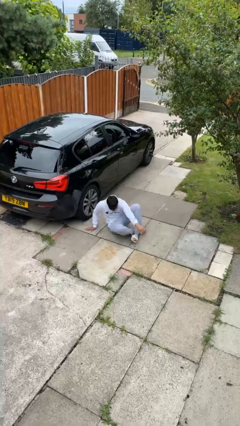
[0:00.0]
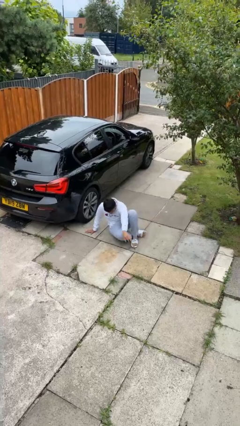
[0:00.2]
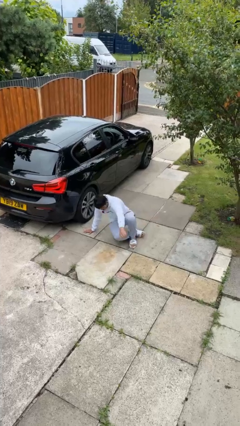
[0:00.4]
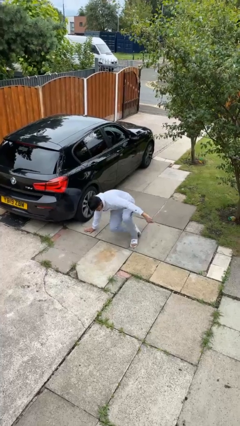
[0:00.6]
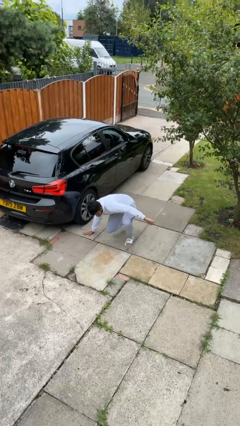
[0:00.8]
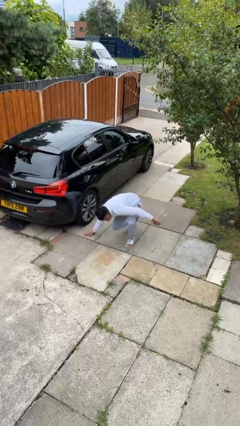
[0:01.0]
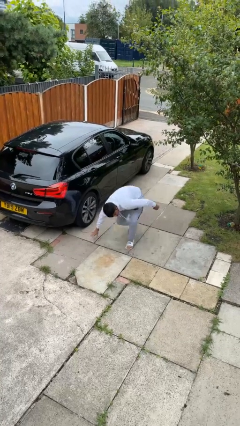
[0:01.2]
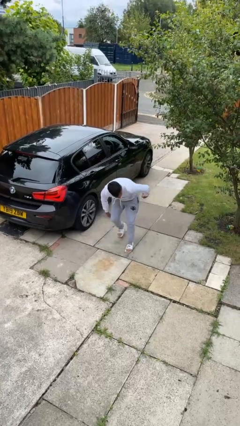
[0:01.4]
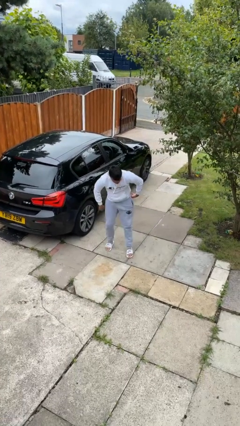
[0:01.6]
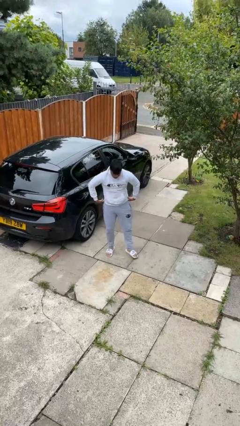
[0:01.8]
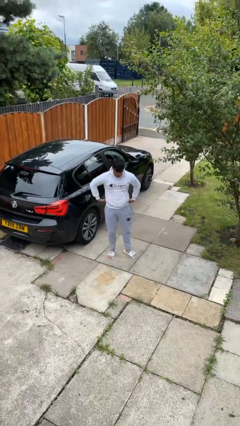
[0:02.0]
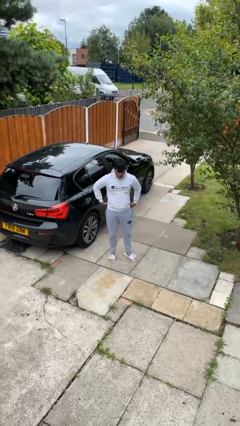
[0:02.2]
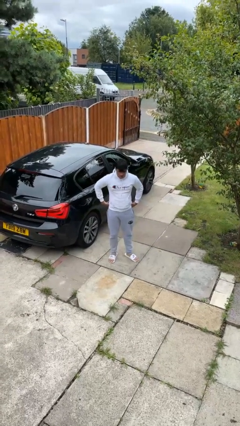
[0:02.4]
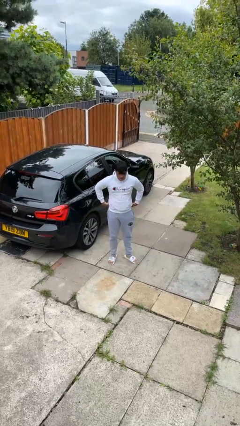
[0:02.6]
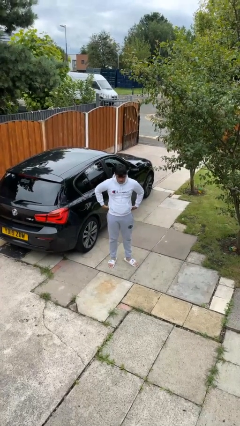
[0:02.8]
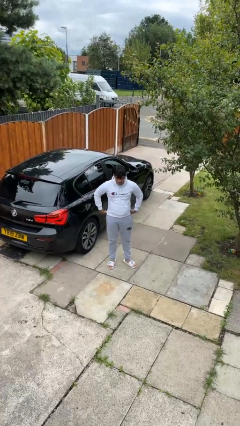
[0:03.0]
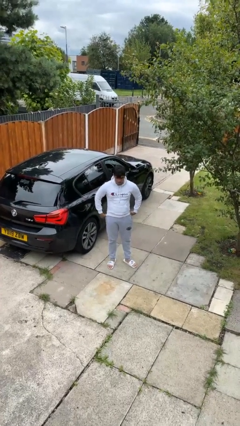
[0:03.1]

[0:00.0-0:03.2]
person stands up from floor

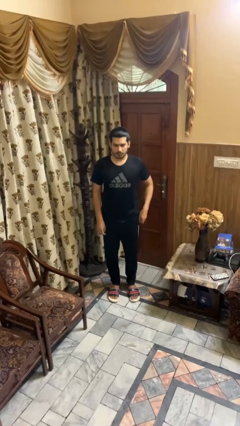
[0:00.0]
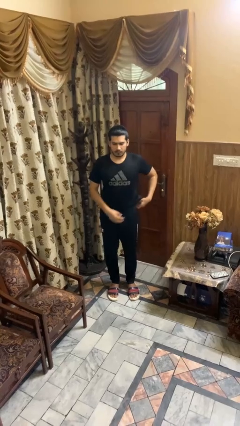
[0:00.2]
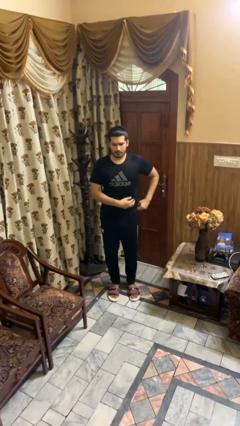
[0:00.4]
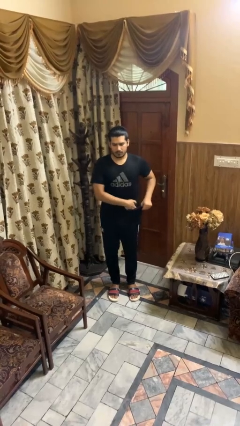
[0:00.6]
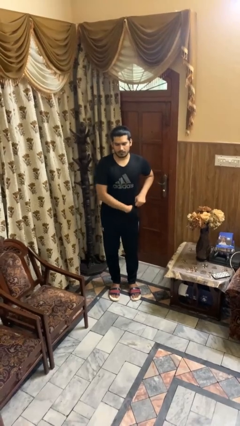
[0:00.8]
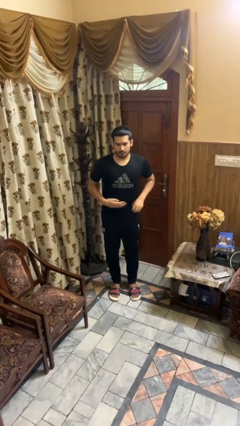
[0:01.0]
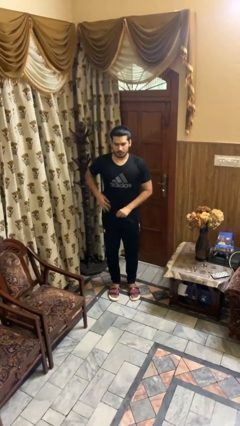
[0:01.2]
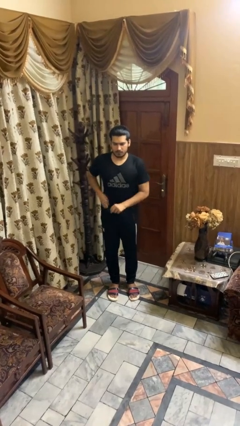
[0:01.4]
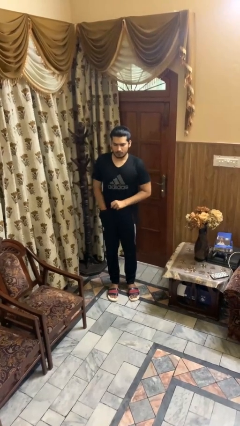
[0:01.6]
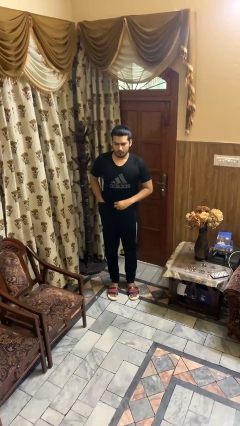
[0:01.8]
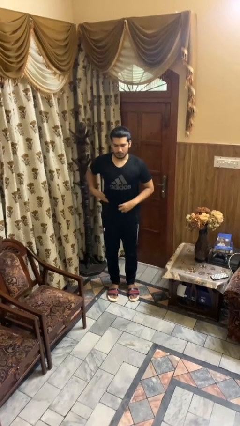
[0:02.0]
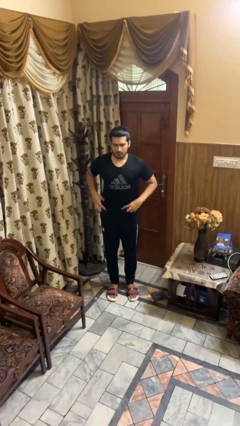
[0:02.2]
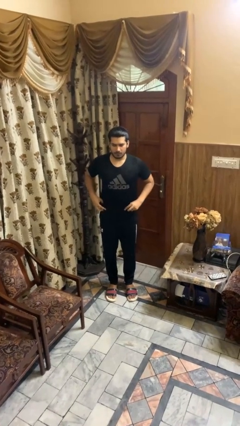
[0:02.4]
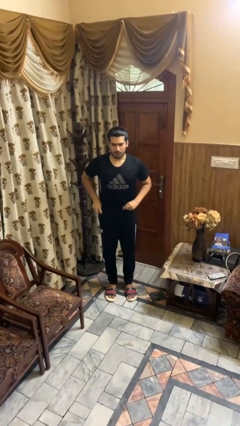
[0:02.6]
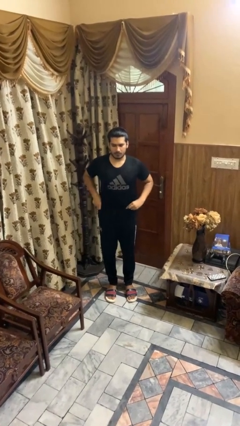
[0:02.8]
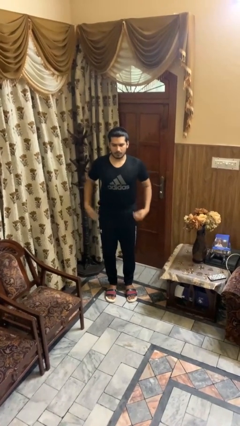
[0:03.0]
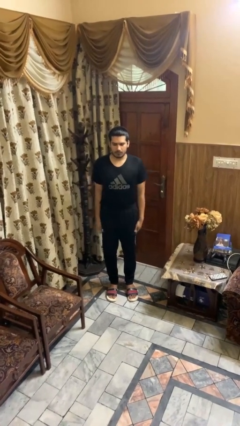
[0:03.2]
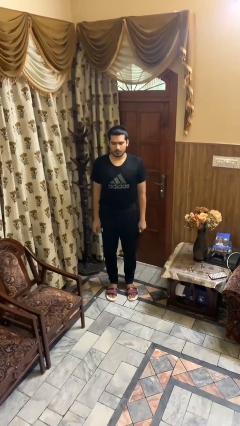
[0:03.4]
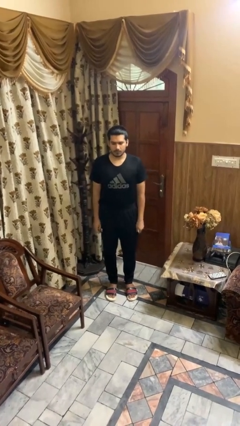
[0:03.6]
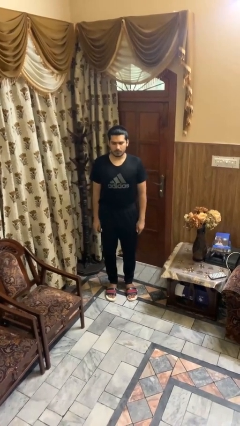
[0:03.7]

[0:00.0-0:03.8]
person tucks in shirt

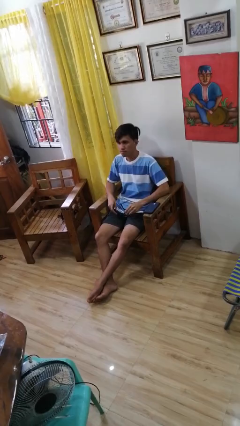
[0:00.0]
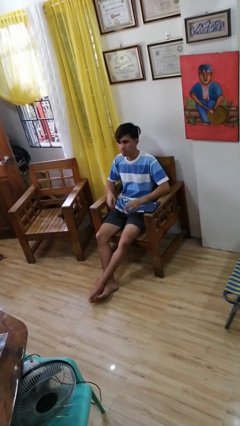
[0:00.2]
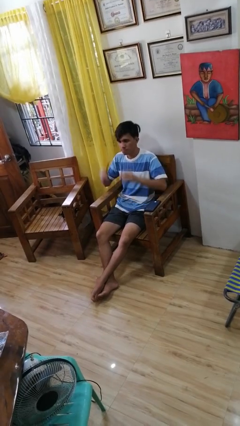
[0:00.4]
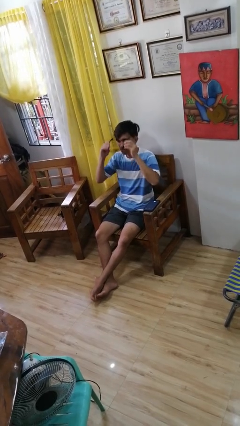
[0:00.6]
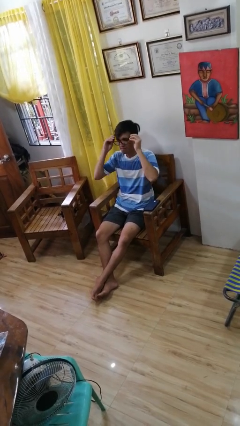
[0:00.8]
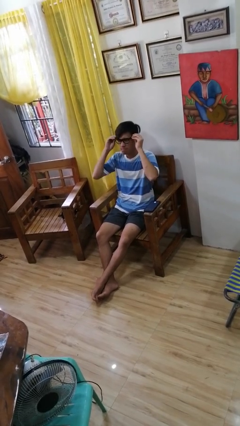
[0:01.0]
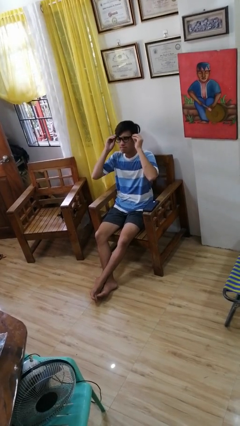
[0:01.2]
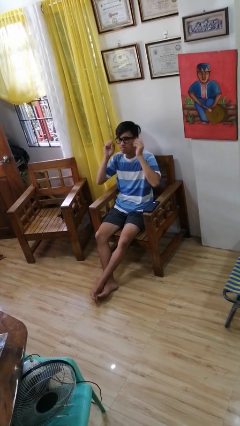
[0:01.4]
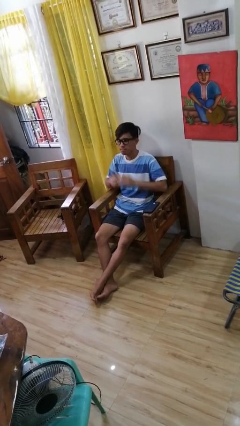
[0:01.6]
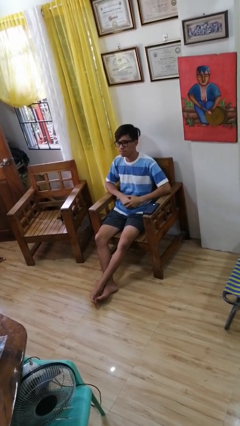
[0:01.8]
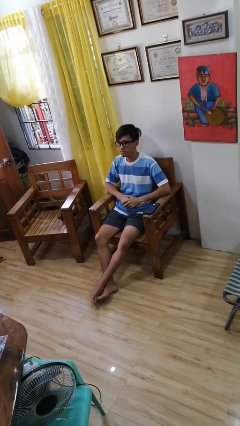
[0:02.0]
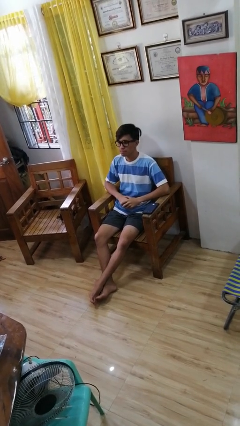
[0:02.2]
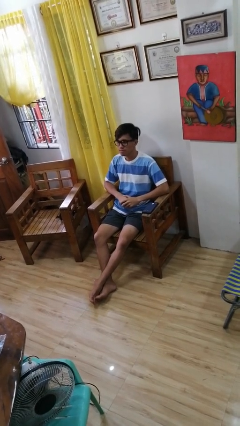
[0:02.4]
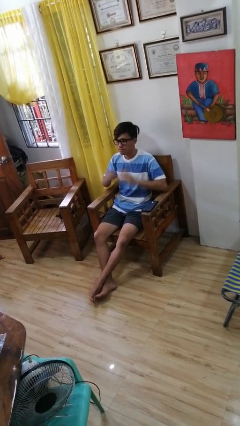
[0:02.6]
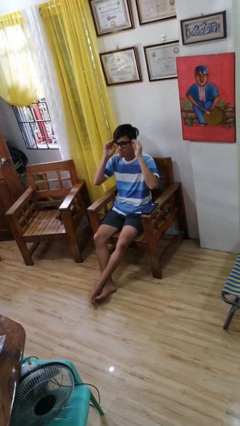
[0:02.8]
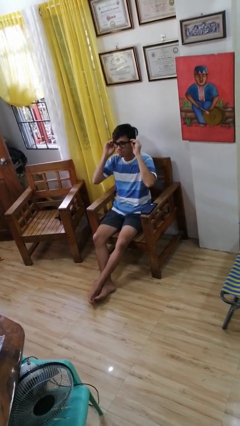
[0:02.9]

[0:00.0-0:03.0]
person puts on glasses

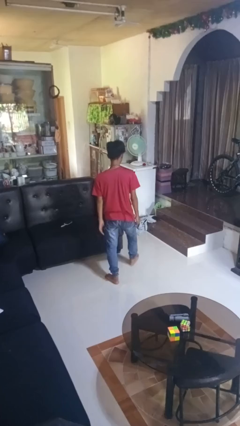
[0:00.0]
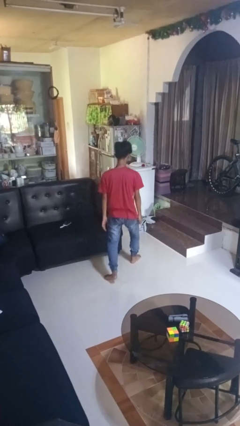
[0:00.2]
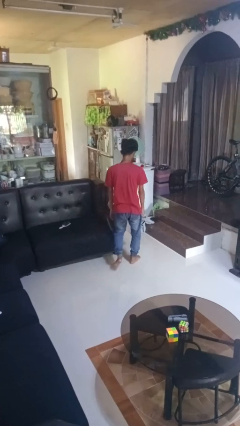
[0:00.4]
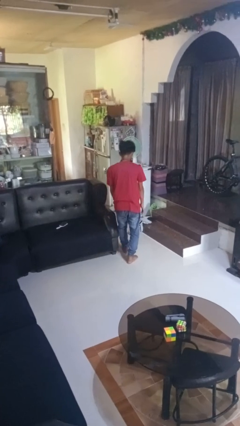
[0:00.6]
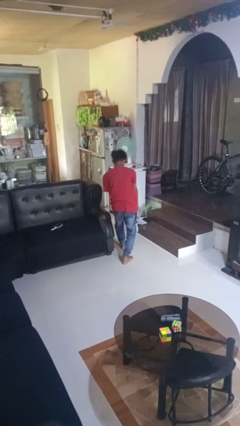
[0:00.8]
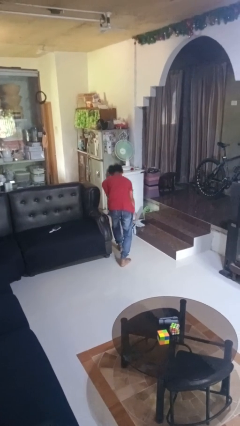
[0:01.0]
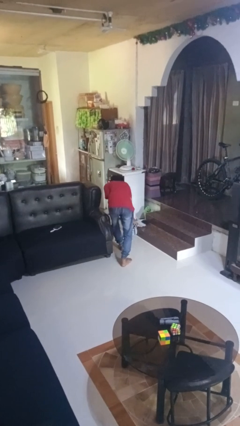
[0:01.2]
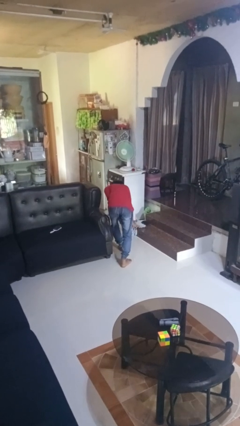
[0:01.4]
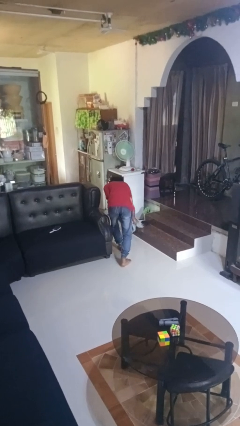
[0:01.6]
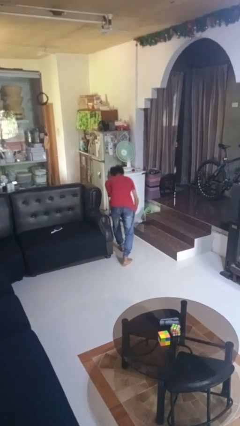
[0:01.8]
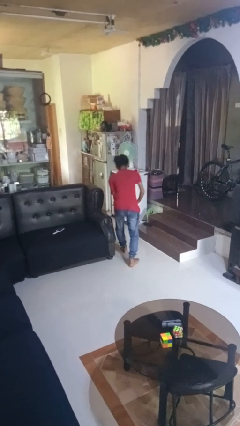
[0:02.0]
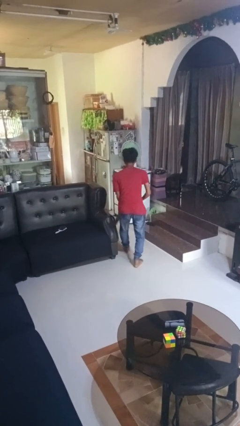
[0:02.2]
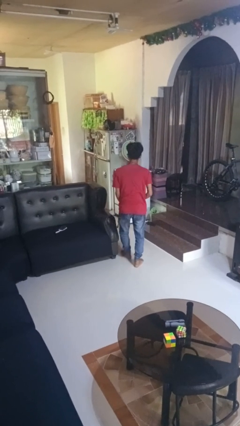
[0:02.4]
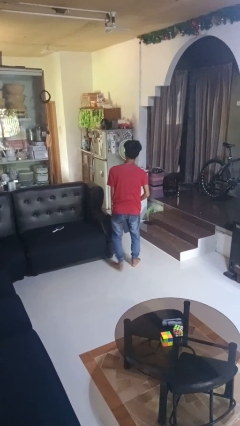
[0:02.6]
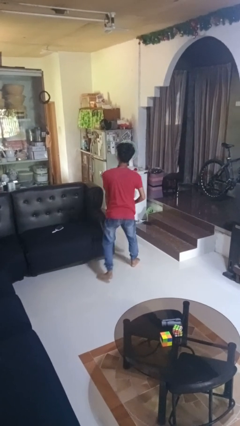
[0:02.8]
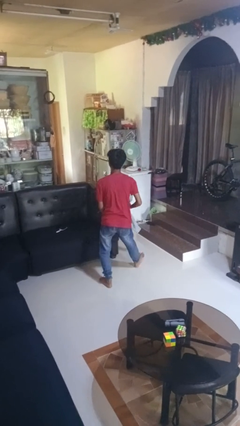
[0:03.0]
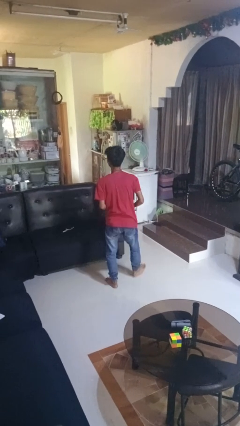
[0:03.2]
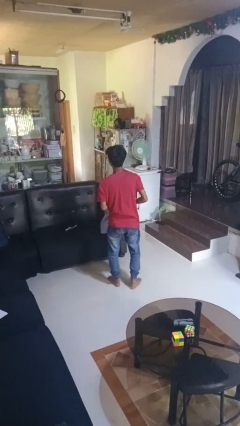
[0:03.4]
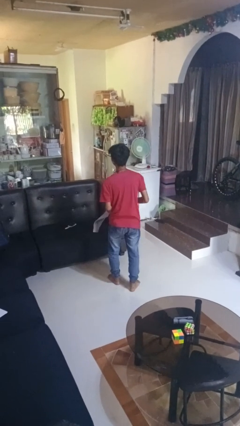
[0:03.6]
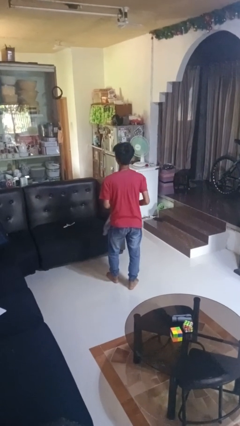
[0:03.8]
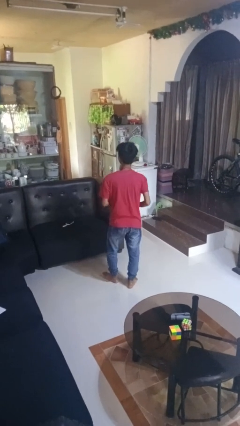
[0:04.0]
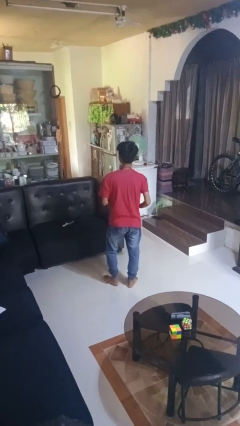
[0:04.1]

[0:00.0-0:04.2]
person picks up object from floor

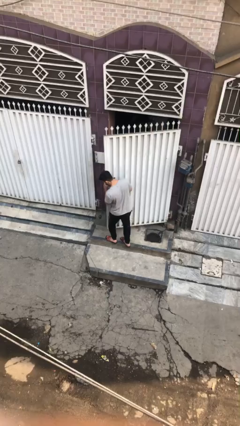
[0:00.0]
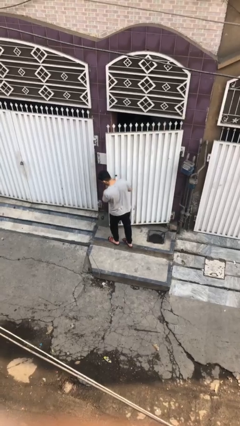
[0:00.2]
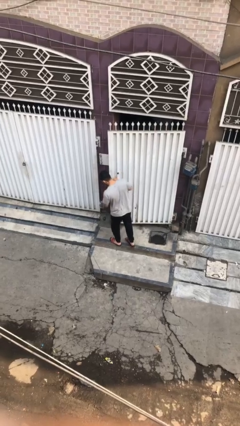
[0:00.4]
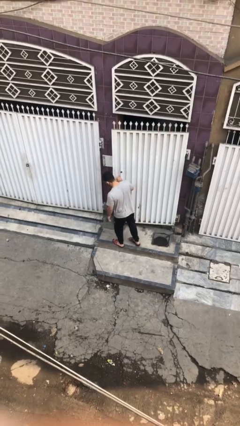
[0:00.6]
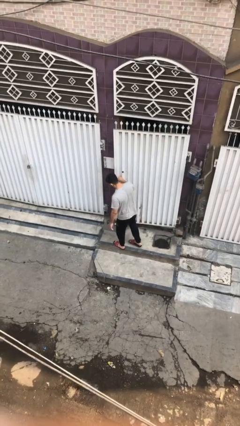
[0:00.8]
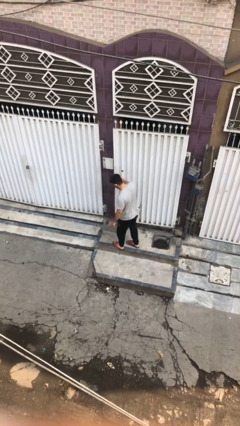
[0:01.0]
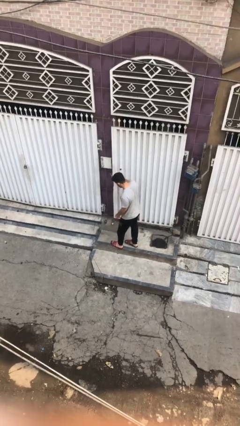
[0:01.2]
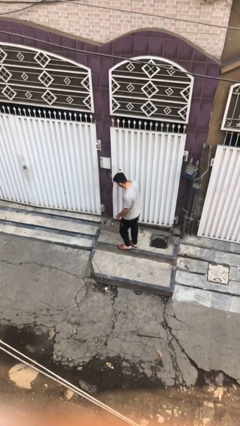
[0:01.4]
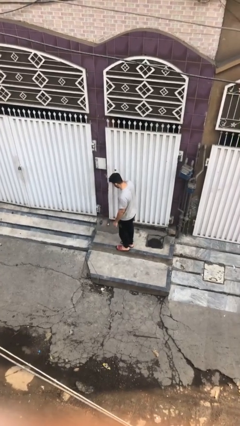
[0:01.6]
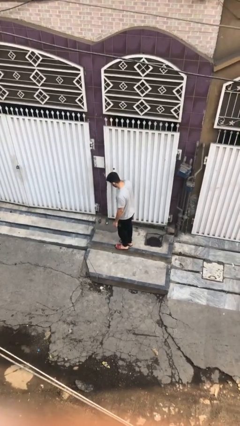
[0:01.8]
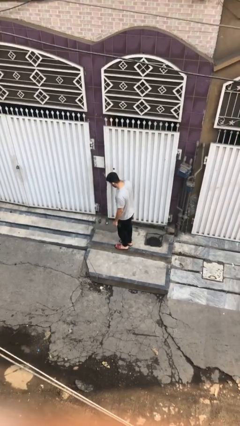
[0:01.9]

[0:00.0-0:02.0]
person closes facility door

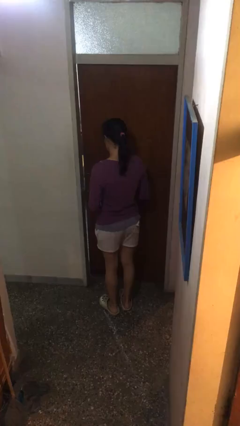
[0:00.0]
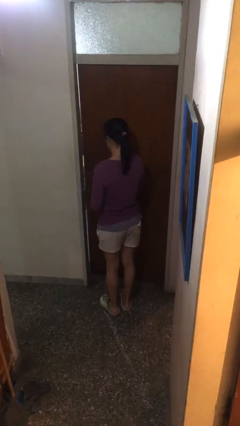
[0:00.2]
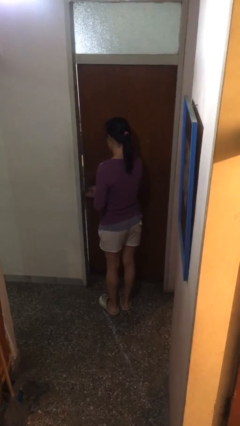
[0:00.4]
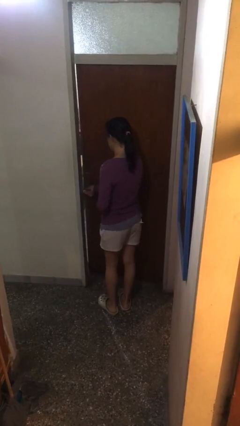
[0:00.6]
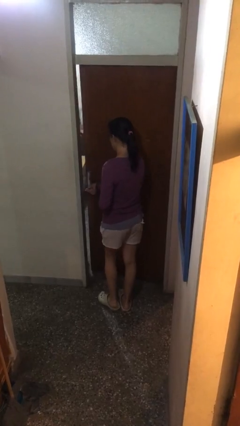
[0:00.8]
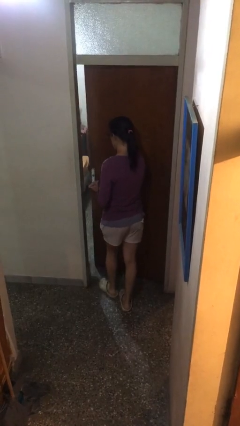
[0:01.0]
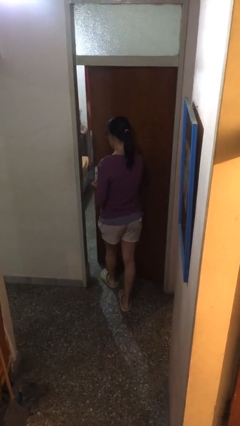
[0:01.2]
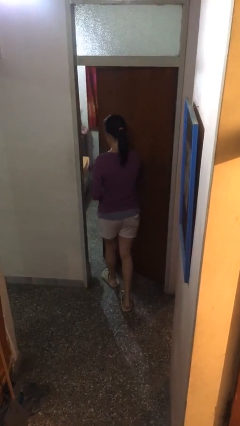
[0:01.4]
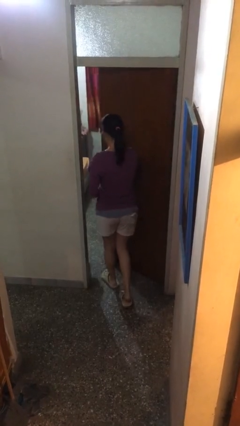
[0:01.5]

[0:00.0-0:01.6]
person opens facility door
